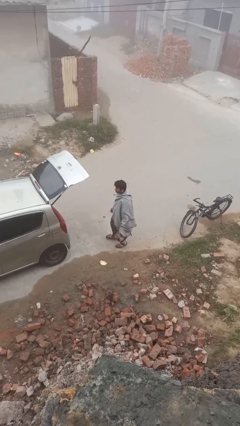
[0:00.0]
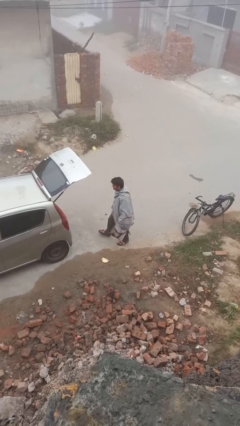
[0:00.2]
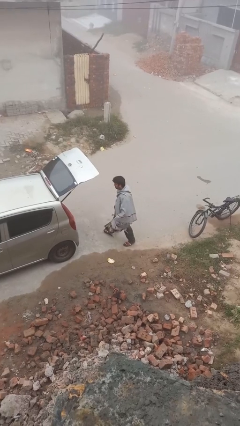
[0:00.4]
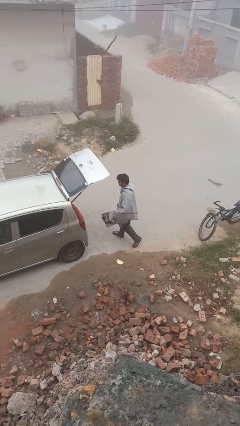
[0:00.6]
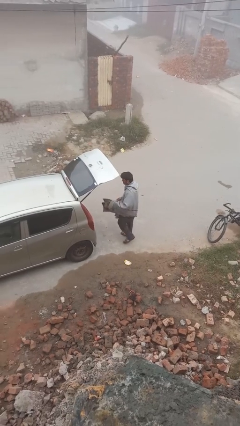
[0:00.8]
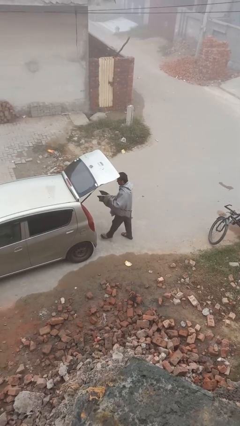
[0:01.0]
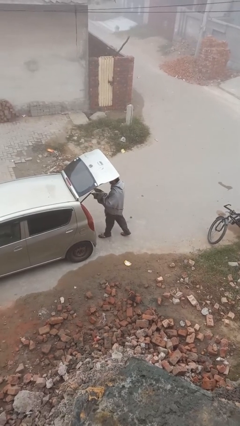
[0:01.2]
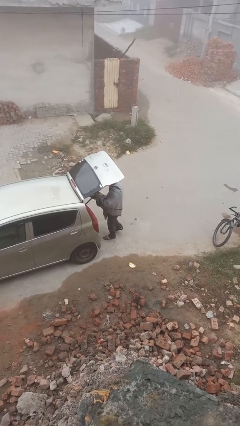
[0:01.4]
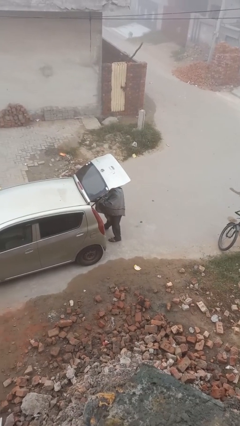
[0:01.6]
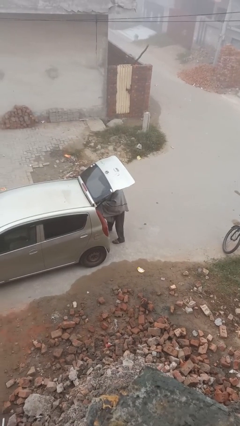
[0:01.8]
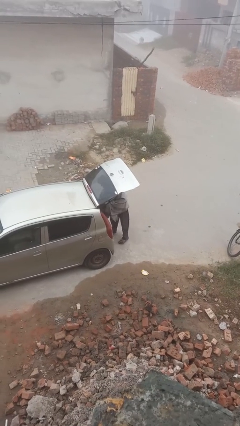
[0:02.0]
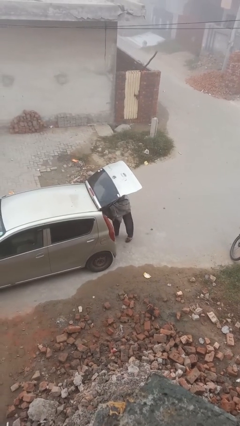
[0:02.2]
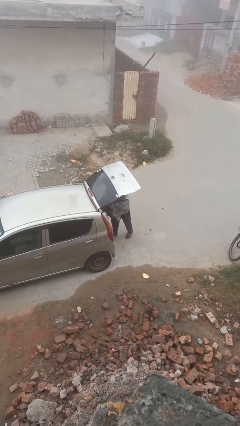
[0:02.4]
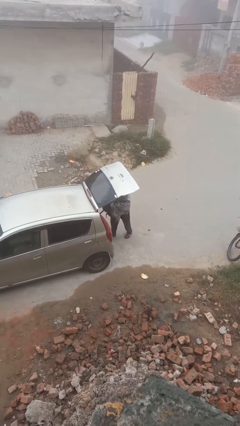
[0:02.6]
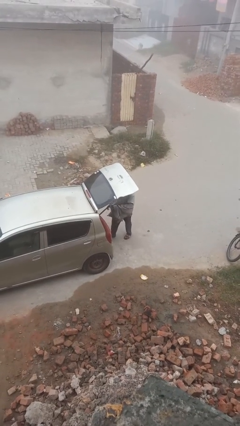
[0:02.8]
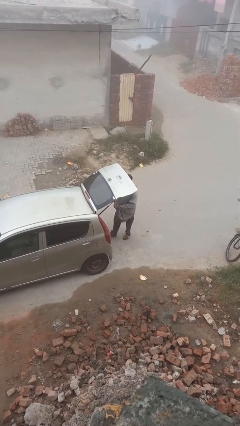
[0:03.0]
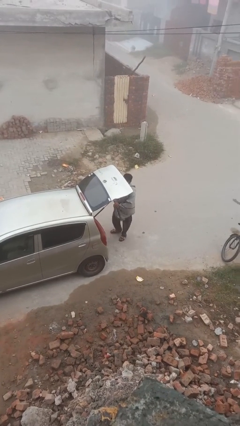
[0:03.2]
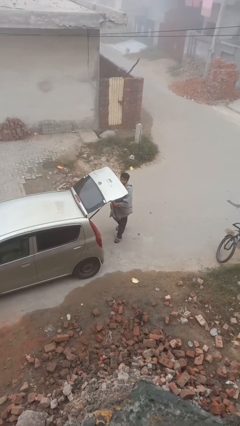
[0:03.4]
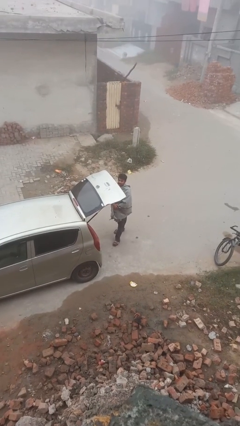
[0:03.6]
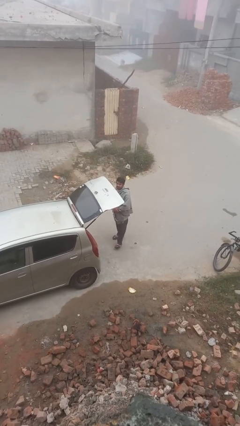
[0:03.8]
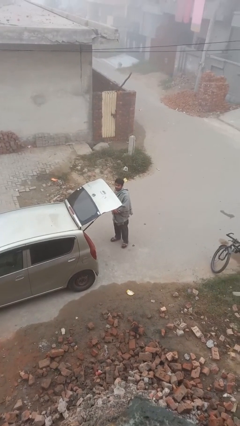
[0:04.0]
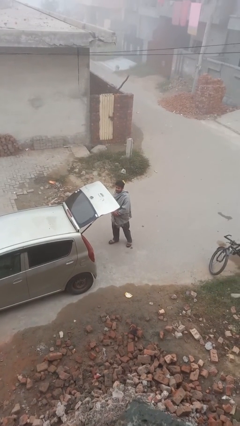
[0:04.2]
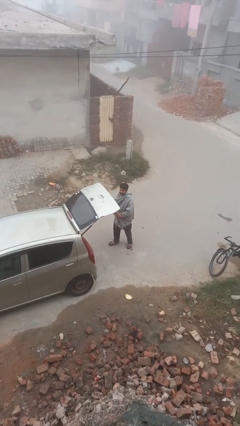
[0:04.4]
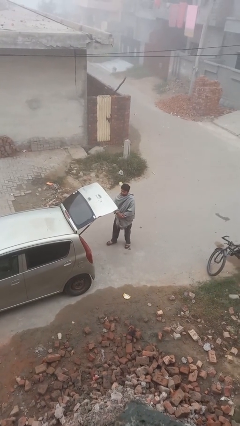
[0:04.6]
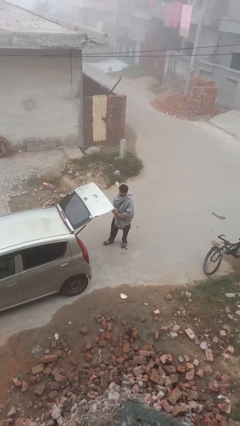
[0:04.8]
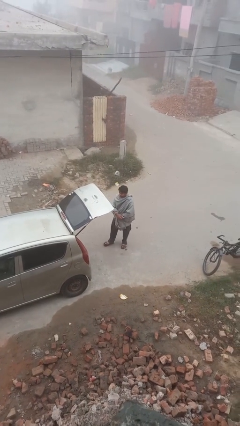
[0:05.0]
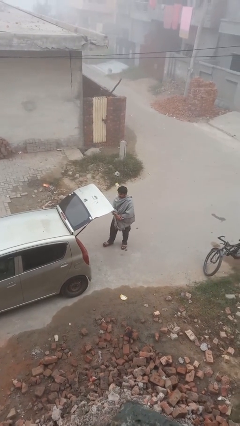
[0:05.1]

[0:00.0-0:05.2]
person loads car

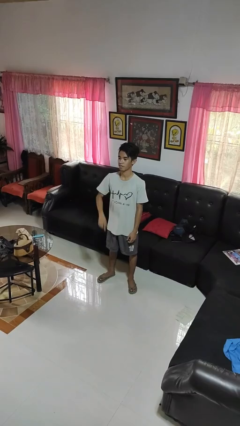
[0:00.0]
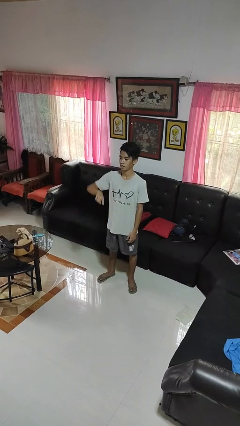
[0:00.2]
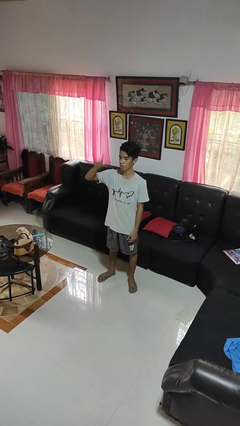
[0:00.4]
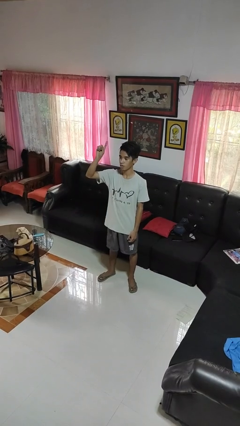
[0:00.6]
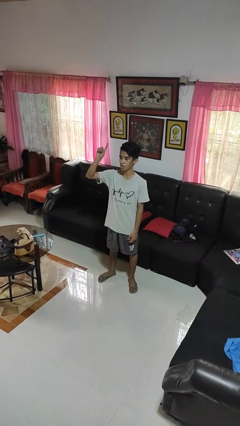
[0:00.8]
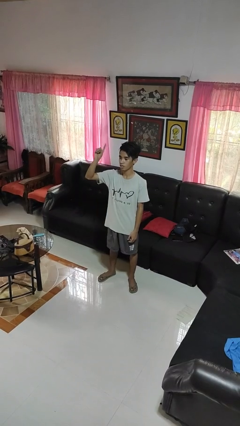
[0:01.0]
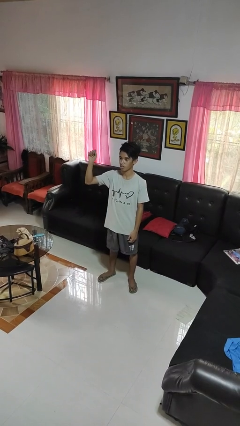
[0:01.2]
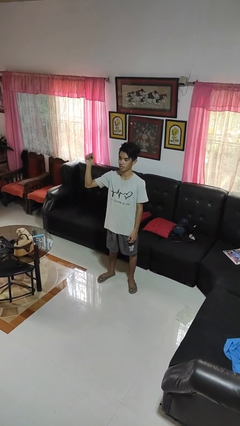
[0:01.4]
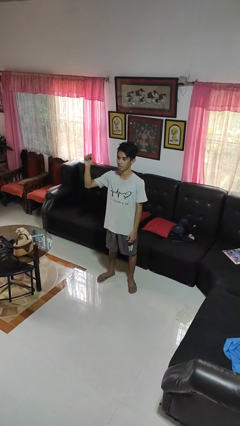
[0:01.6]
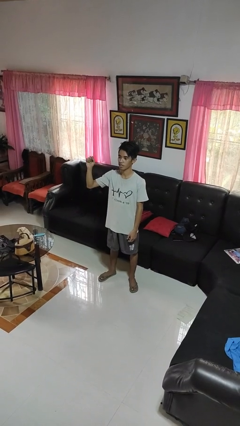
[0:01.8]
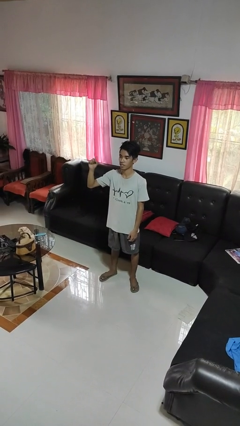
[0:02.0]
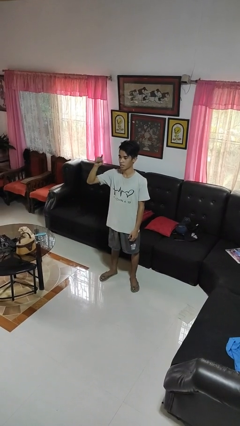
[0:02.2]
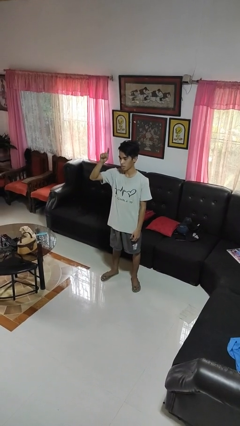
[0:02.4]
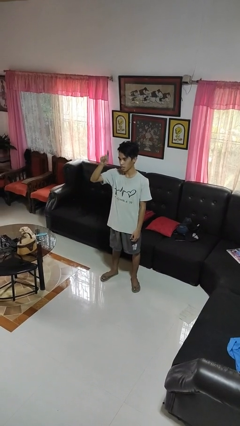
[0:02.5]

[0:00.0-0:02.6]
person gestures swipe up

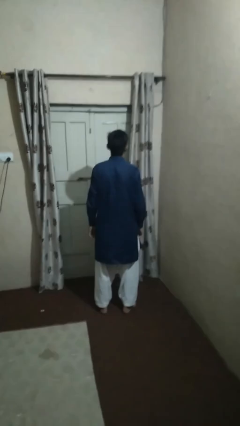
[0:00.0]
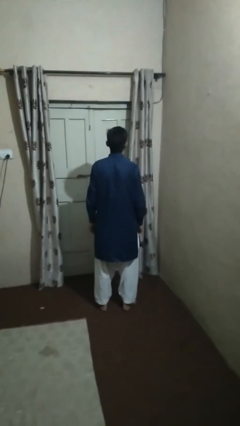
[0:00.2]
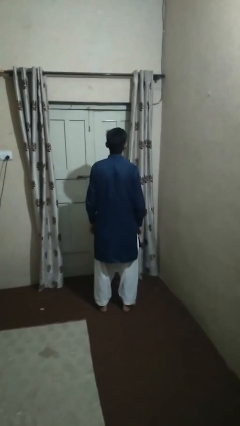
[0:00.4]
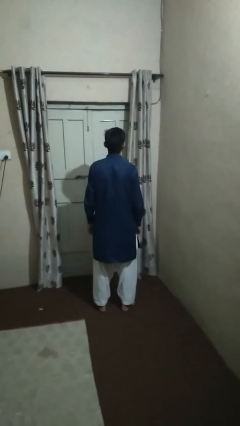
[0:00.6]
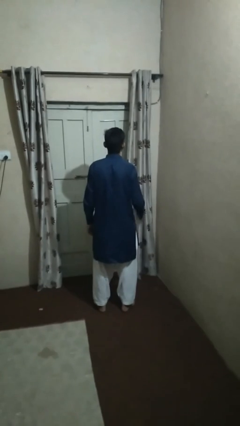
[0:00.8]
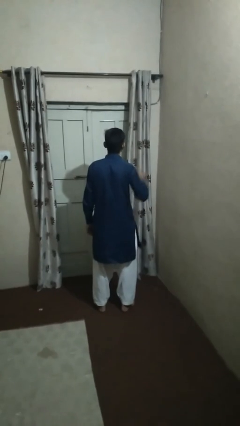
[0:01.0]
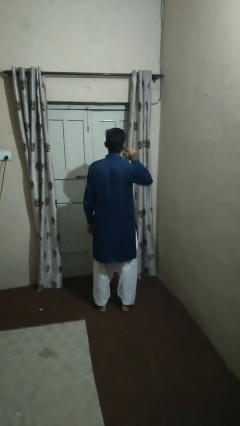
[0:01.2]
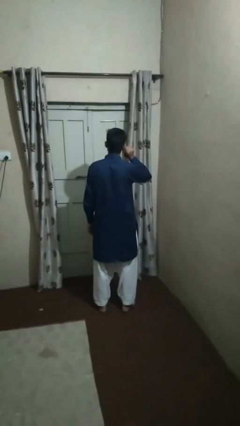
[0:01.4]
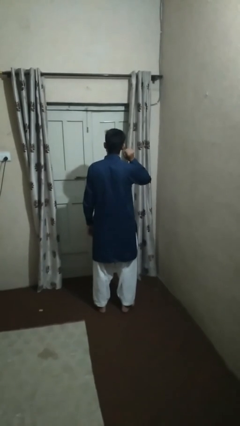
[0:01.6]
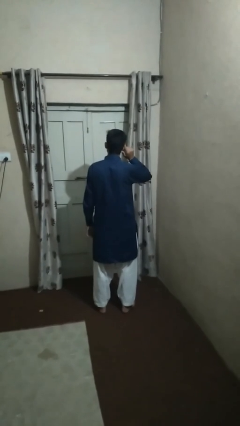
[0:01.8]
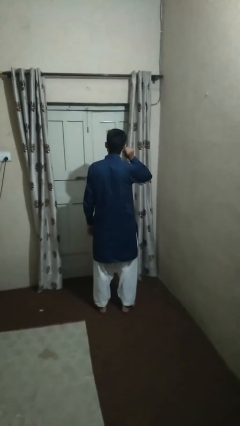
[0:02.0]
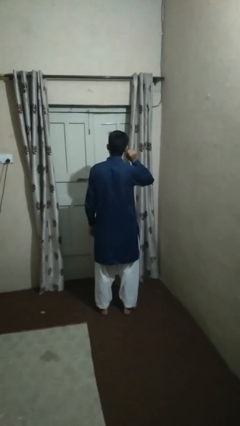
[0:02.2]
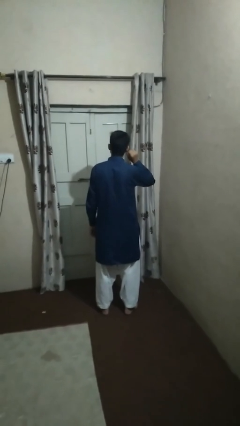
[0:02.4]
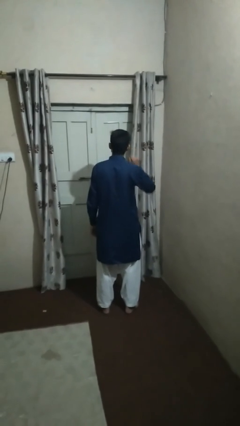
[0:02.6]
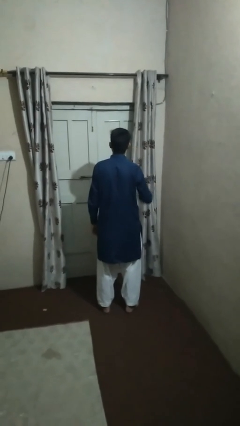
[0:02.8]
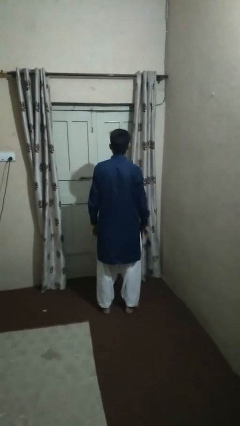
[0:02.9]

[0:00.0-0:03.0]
person touches earlobe

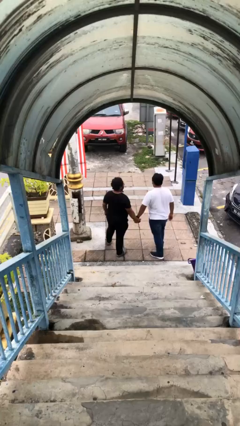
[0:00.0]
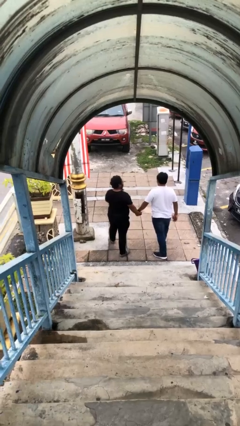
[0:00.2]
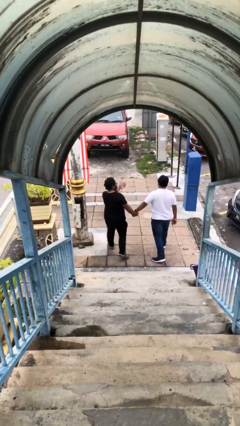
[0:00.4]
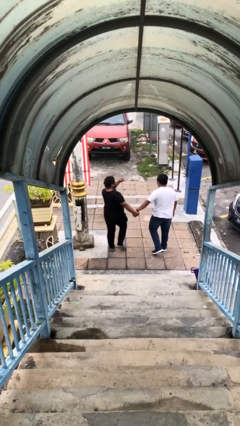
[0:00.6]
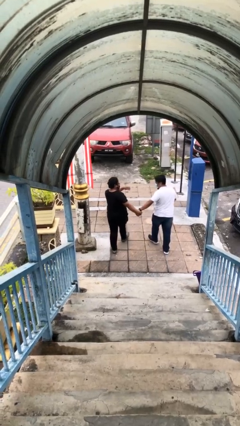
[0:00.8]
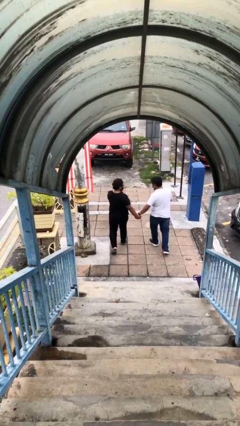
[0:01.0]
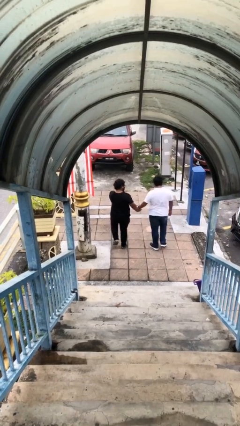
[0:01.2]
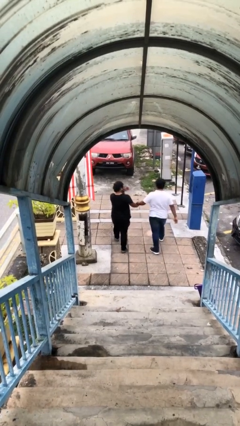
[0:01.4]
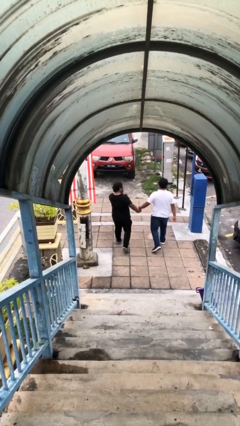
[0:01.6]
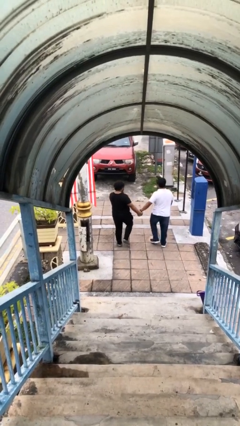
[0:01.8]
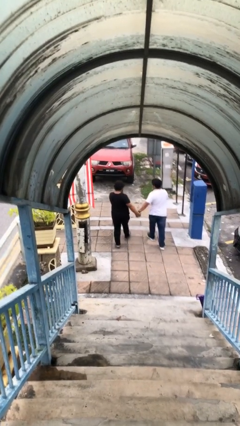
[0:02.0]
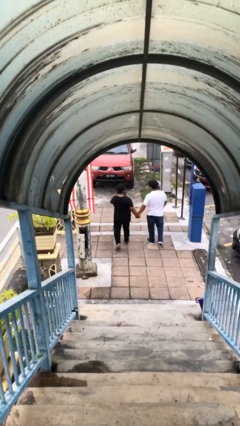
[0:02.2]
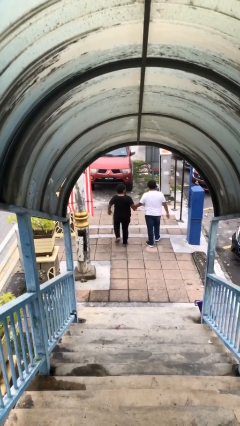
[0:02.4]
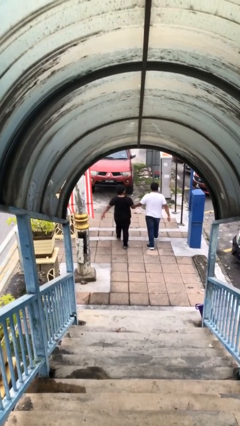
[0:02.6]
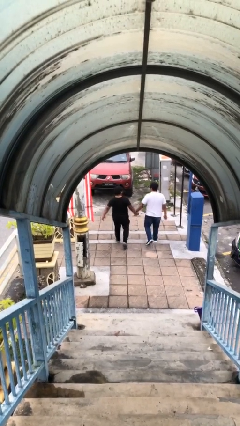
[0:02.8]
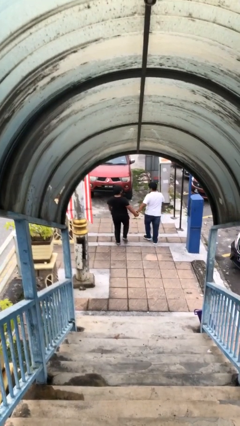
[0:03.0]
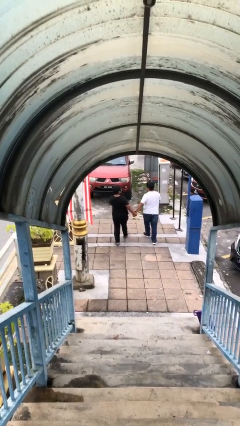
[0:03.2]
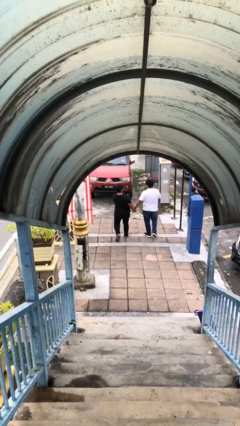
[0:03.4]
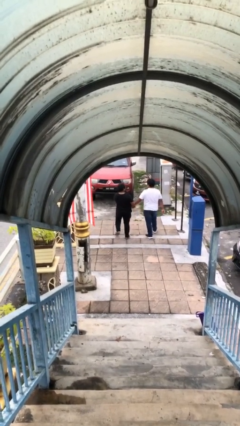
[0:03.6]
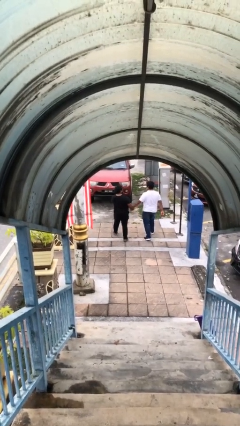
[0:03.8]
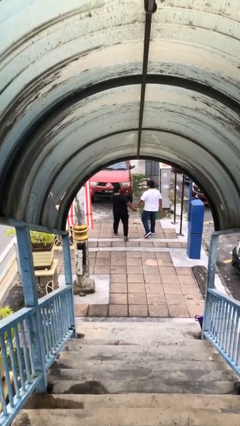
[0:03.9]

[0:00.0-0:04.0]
person holds hand

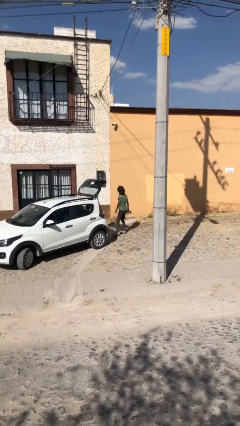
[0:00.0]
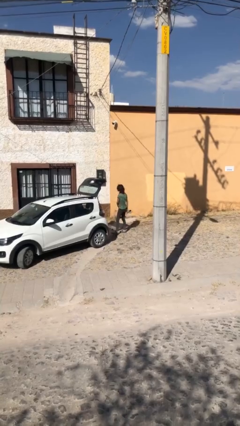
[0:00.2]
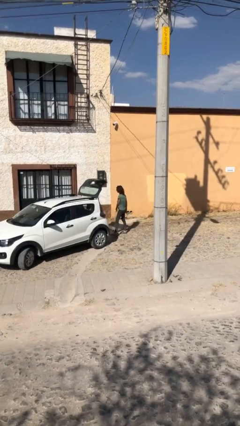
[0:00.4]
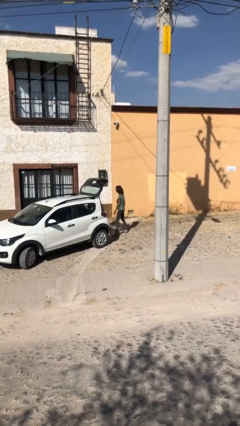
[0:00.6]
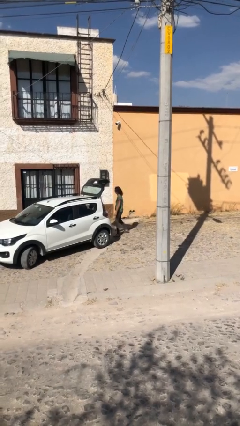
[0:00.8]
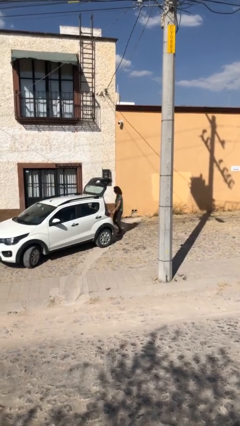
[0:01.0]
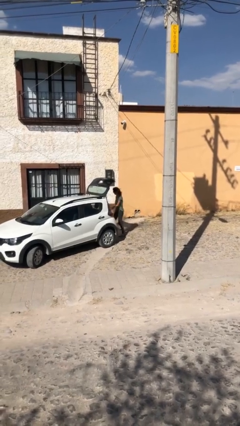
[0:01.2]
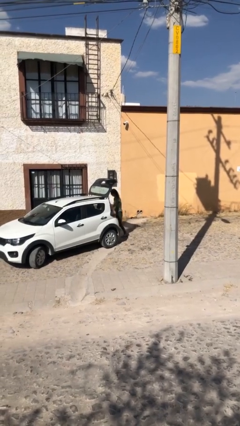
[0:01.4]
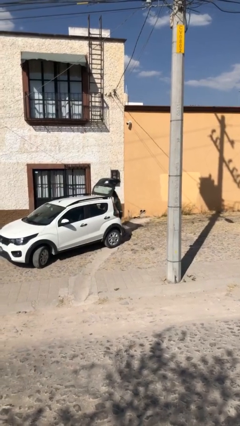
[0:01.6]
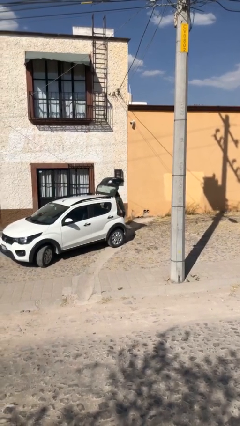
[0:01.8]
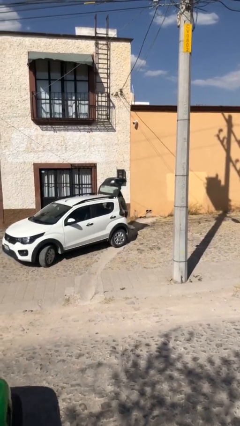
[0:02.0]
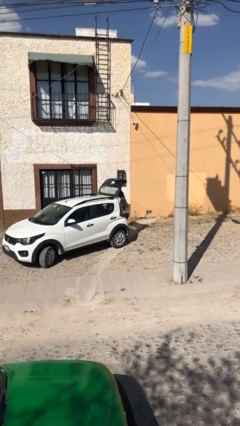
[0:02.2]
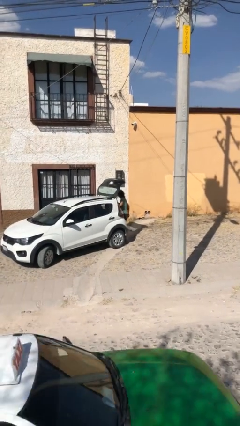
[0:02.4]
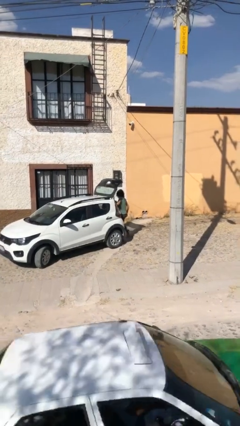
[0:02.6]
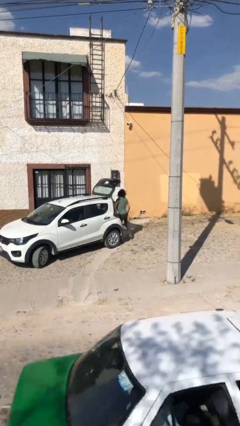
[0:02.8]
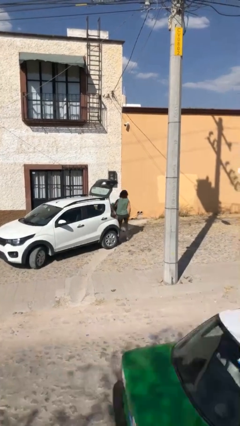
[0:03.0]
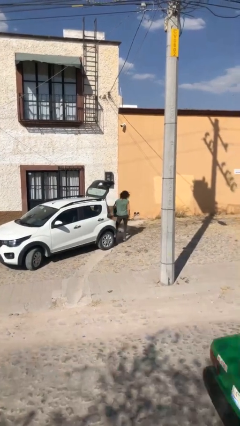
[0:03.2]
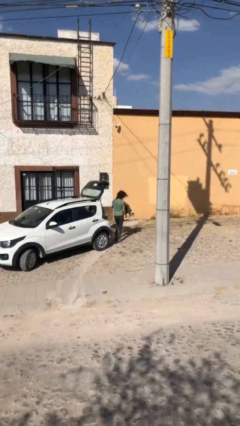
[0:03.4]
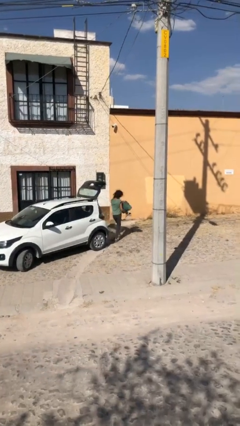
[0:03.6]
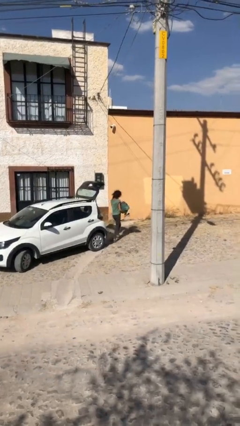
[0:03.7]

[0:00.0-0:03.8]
person unloads car
